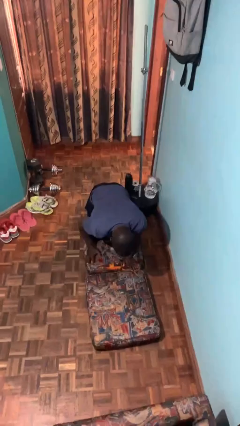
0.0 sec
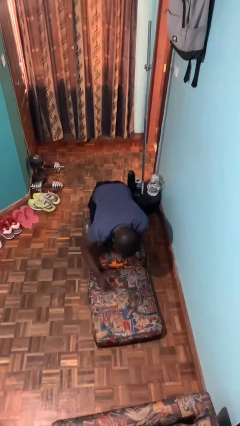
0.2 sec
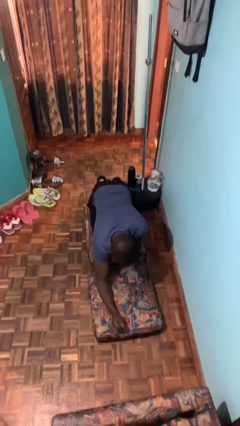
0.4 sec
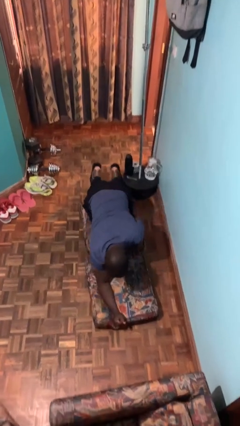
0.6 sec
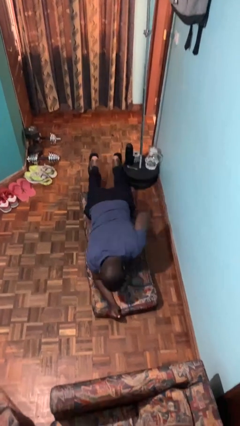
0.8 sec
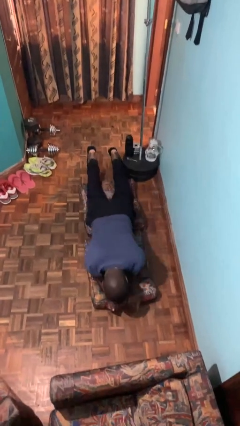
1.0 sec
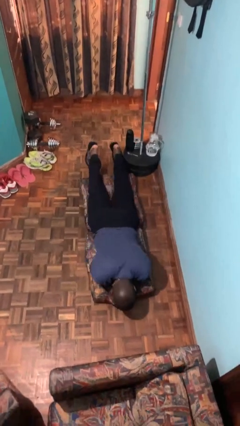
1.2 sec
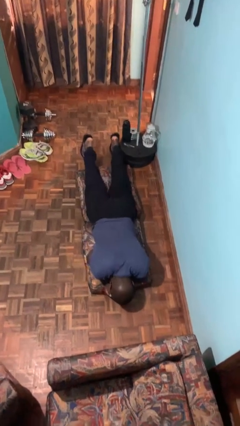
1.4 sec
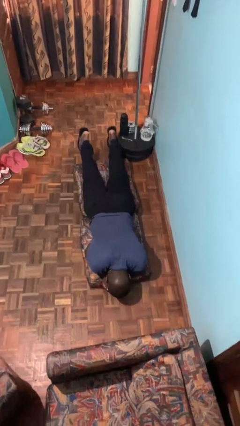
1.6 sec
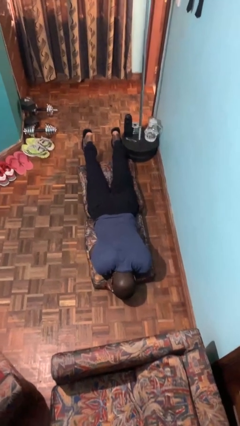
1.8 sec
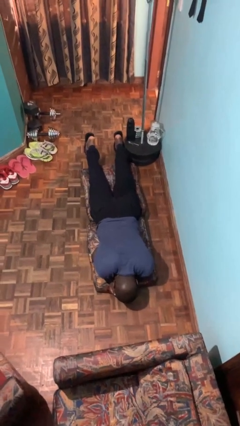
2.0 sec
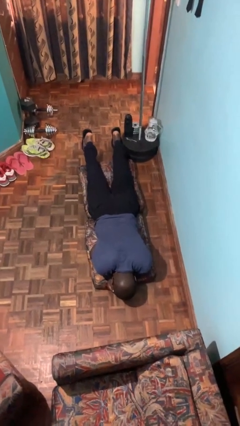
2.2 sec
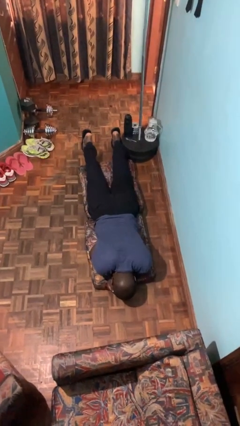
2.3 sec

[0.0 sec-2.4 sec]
person lies down on floor

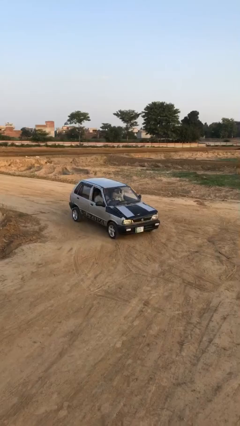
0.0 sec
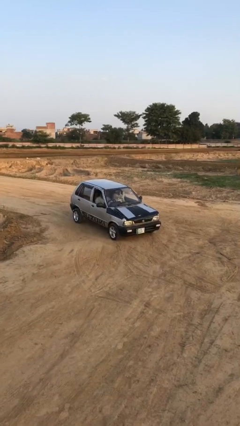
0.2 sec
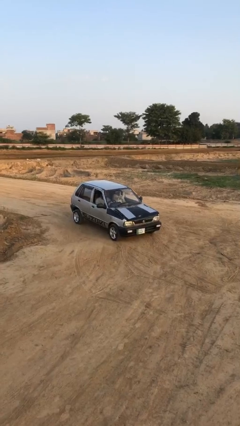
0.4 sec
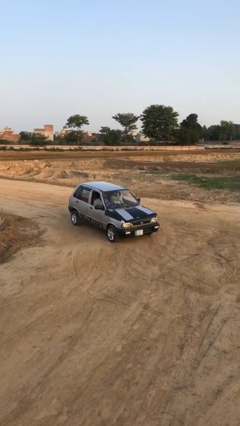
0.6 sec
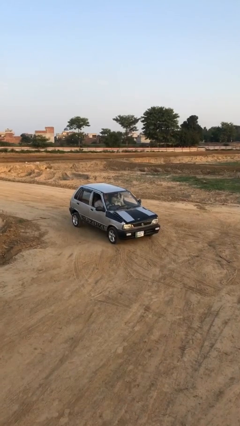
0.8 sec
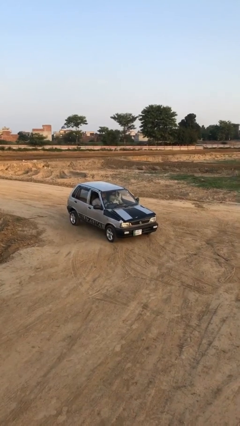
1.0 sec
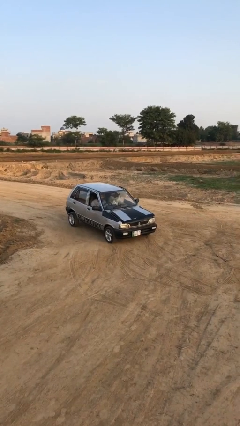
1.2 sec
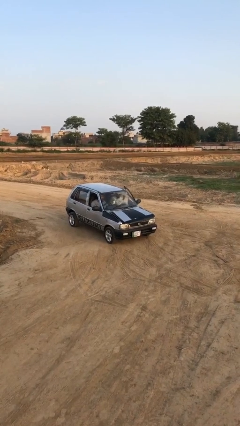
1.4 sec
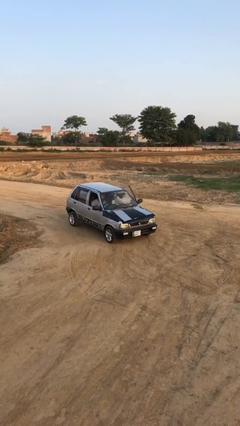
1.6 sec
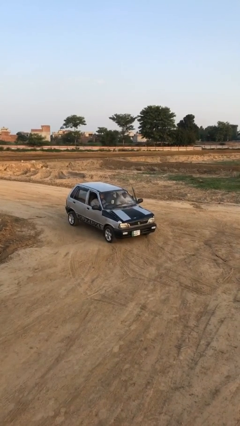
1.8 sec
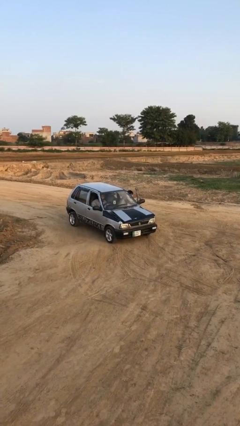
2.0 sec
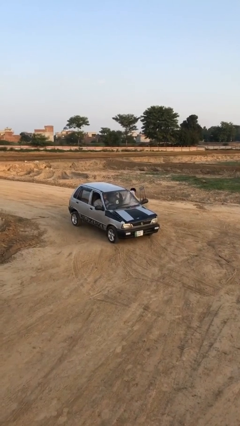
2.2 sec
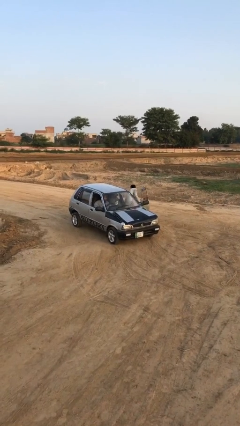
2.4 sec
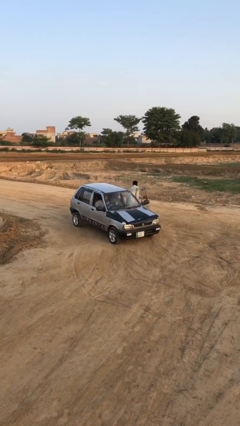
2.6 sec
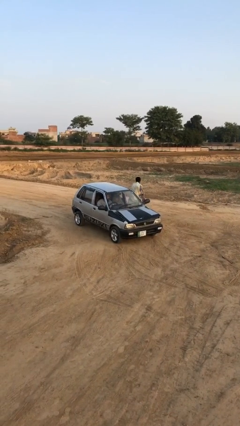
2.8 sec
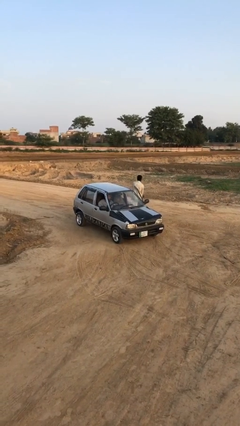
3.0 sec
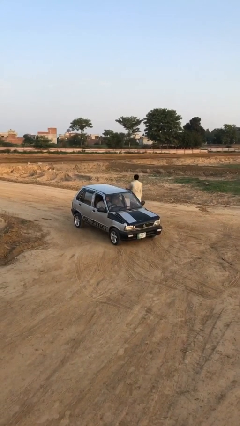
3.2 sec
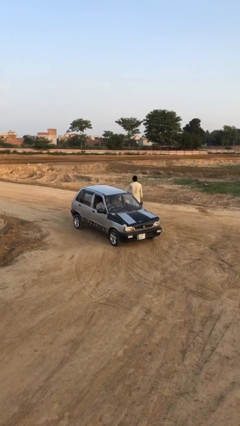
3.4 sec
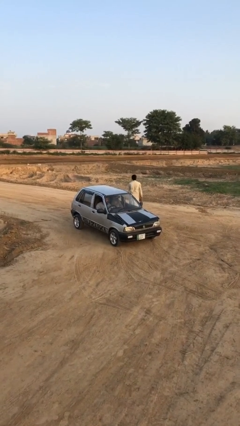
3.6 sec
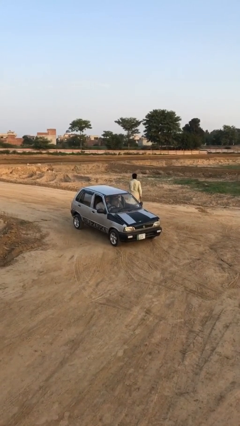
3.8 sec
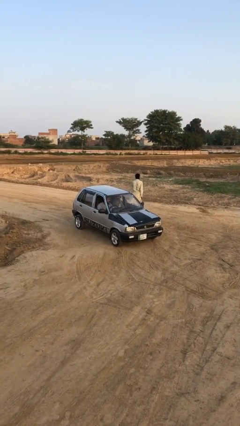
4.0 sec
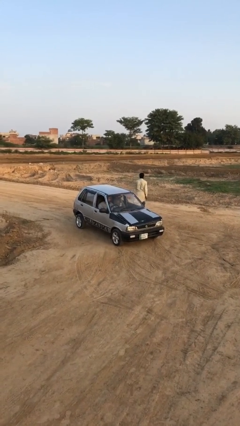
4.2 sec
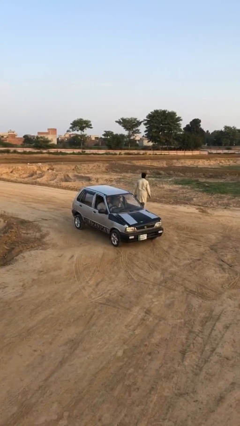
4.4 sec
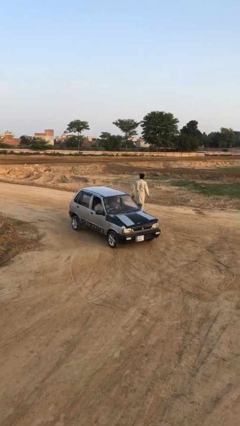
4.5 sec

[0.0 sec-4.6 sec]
car drops off person

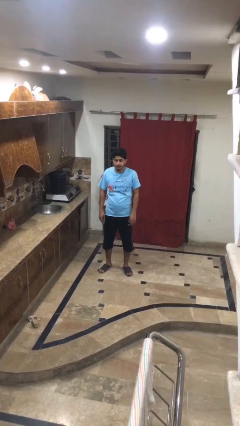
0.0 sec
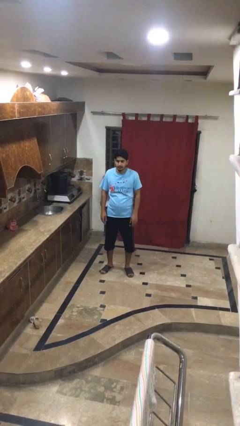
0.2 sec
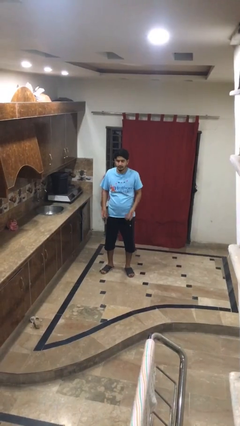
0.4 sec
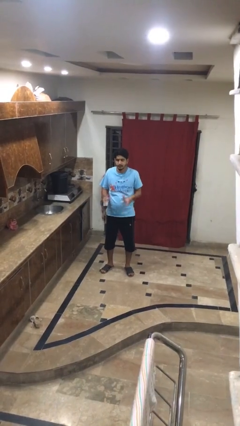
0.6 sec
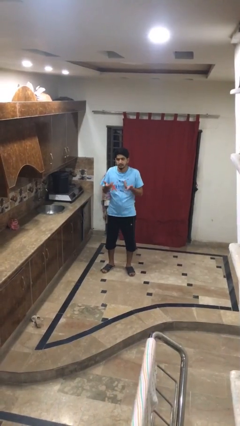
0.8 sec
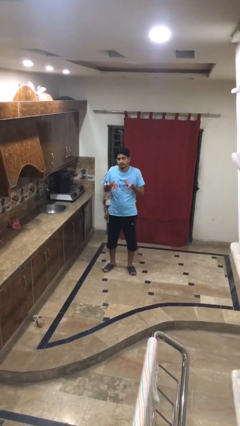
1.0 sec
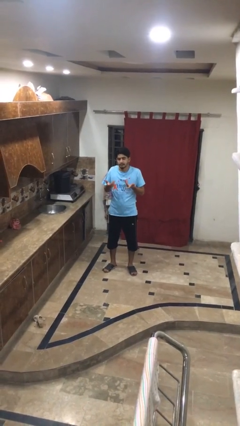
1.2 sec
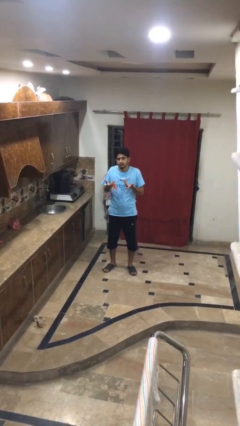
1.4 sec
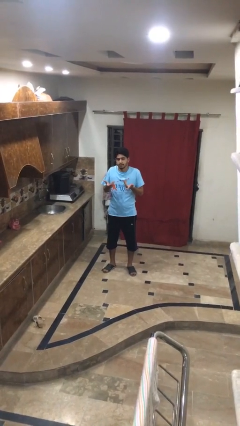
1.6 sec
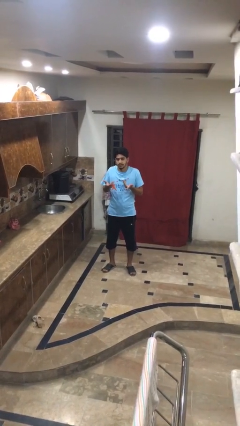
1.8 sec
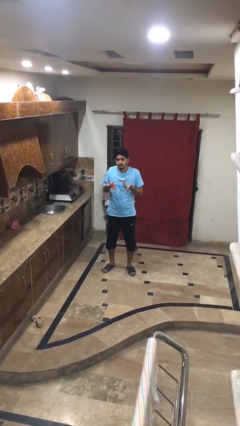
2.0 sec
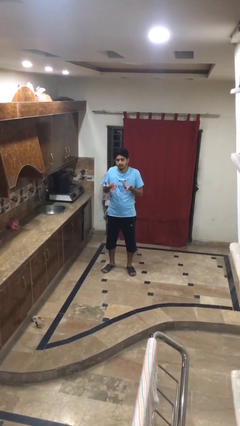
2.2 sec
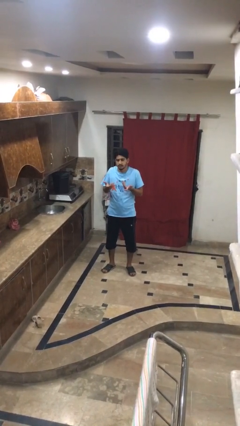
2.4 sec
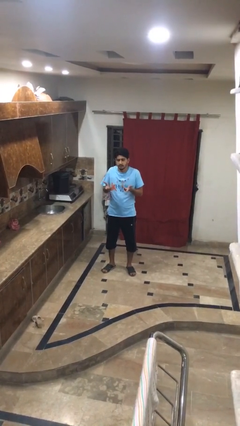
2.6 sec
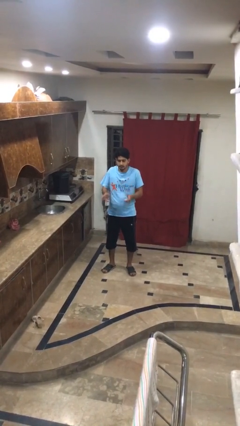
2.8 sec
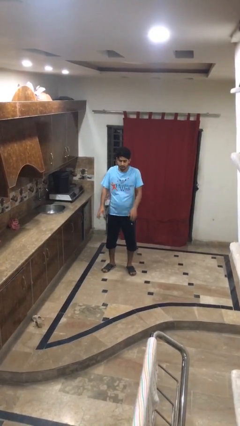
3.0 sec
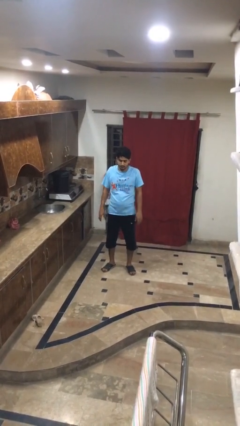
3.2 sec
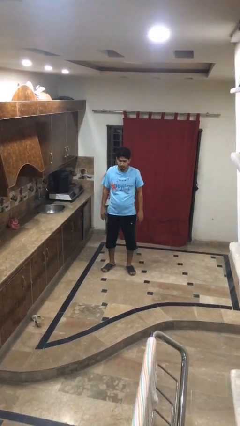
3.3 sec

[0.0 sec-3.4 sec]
person shrugs

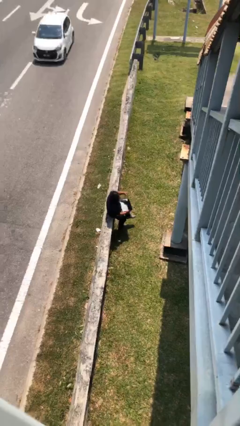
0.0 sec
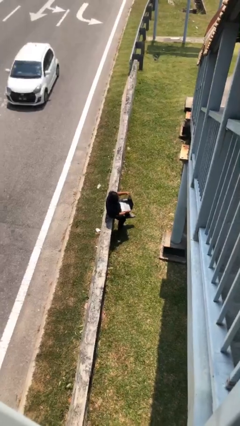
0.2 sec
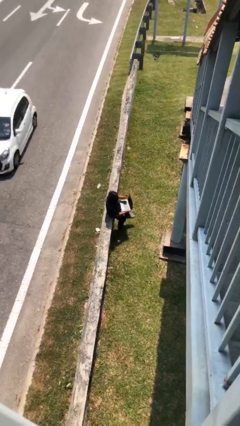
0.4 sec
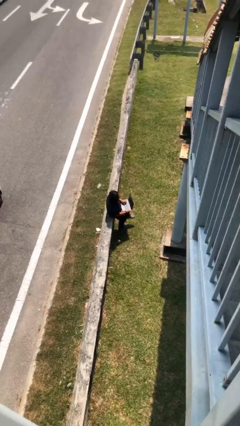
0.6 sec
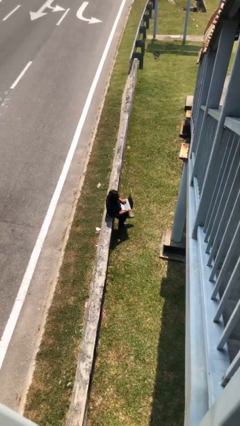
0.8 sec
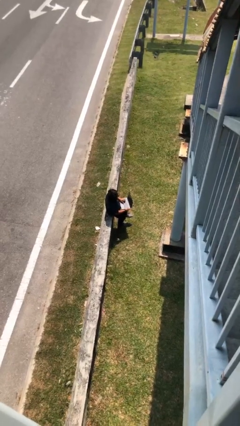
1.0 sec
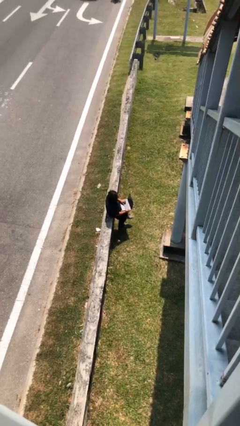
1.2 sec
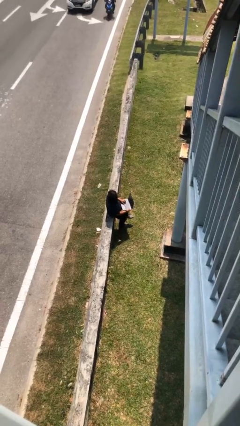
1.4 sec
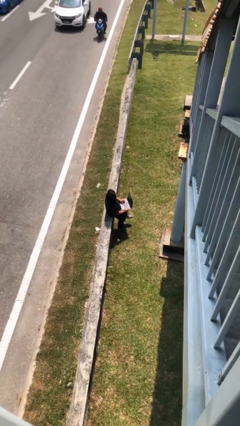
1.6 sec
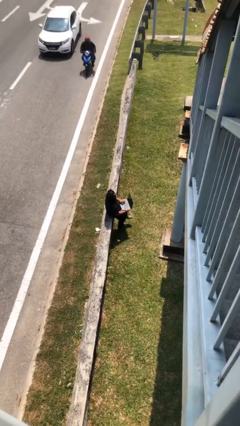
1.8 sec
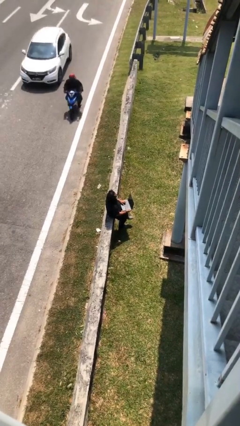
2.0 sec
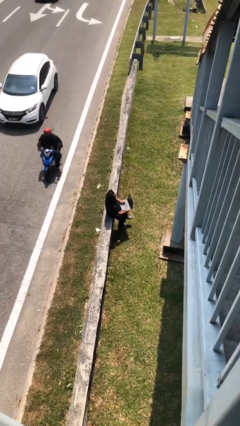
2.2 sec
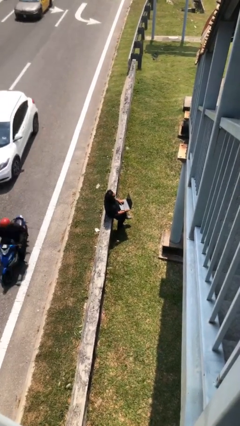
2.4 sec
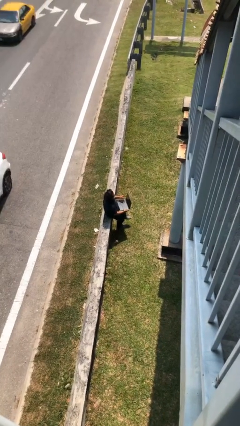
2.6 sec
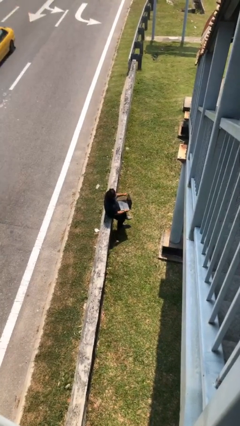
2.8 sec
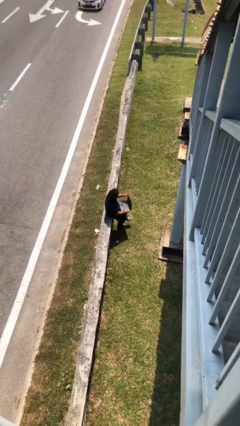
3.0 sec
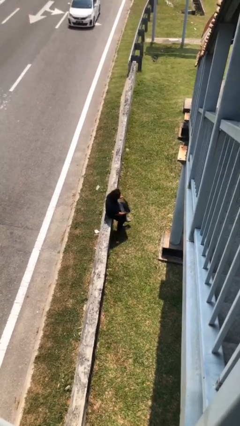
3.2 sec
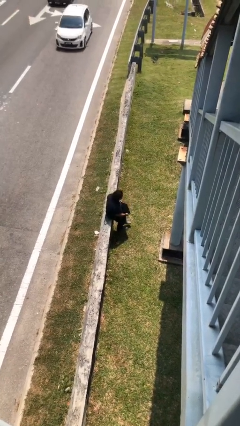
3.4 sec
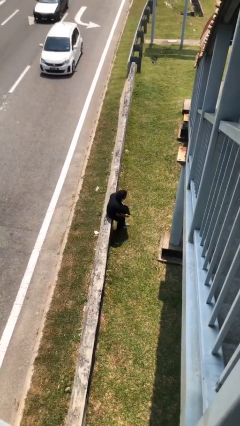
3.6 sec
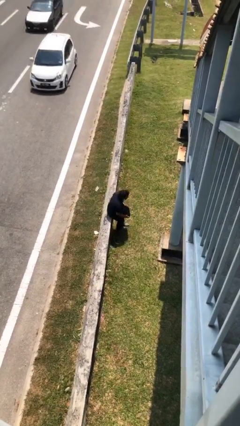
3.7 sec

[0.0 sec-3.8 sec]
person interacts with laptop

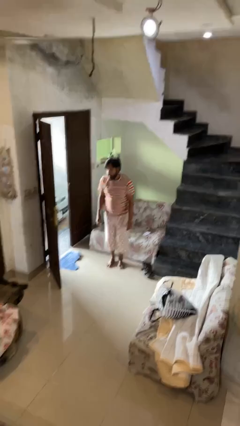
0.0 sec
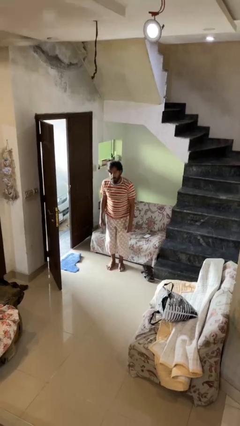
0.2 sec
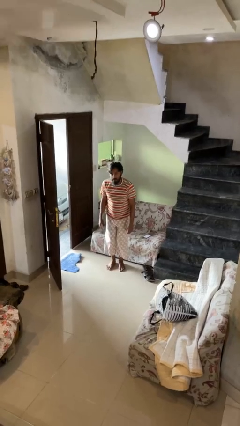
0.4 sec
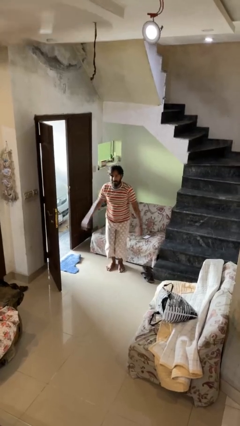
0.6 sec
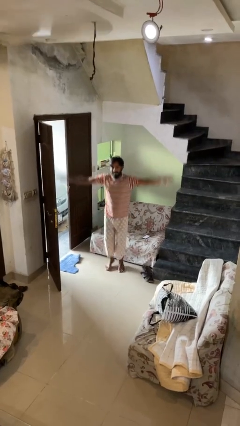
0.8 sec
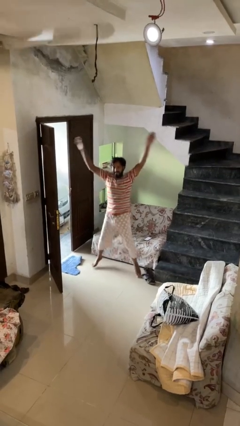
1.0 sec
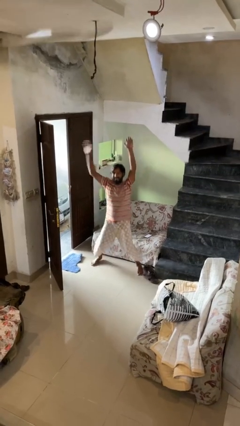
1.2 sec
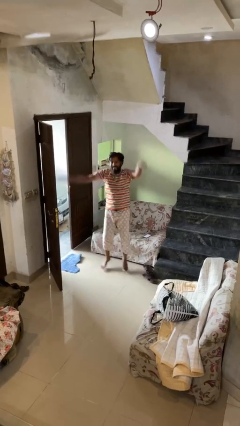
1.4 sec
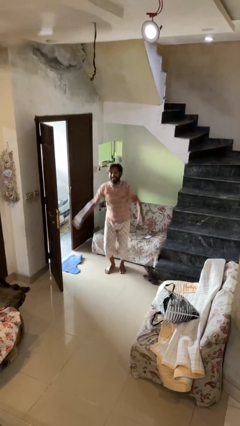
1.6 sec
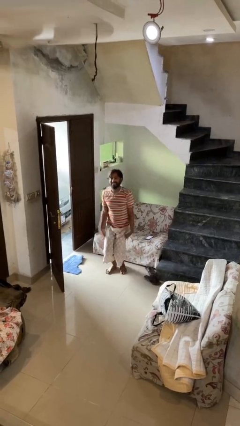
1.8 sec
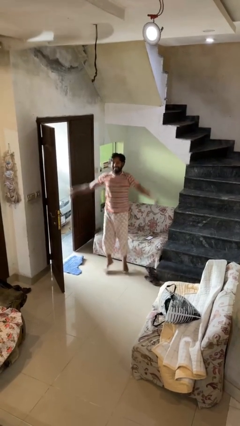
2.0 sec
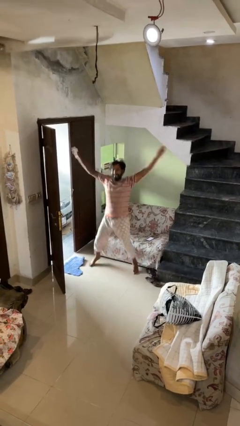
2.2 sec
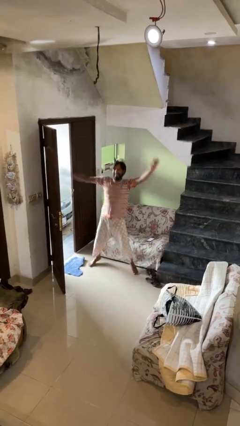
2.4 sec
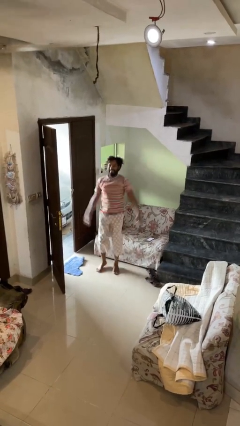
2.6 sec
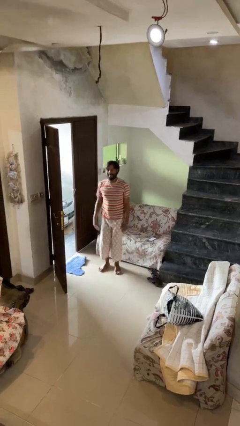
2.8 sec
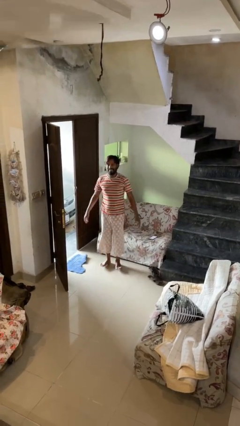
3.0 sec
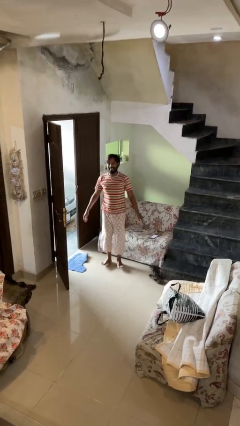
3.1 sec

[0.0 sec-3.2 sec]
person exercises with jumping jacks
